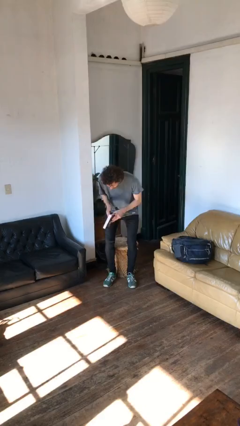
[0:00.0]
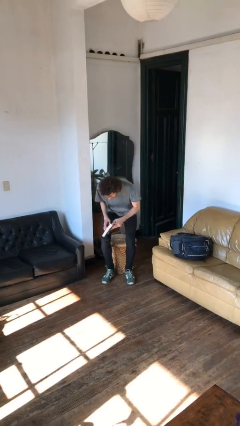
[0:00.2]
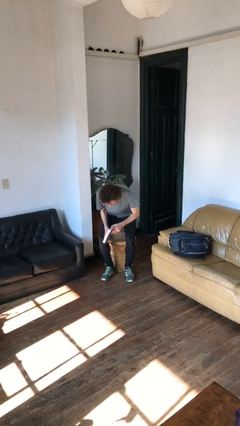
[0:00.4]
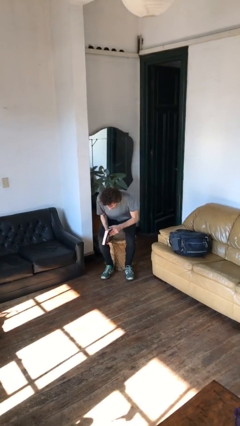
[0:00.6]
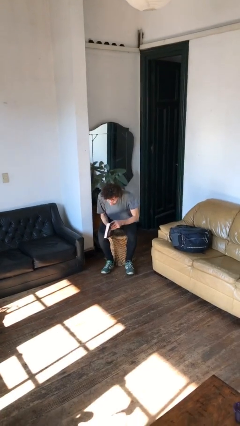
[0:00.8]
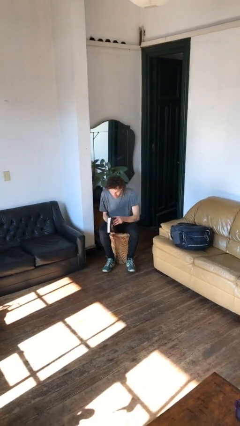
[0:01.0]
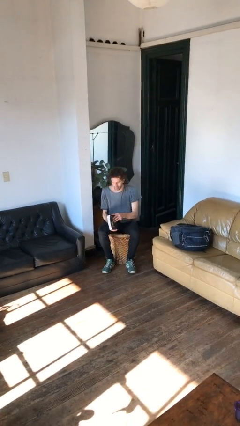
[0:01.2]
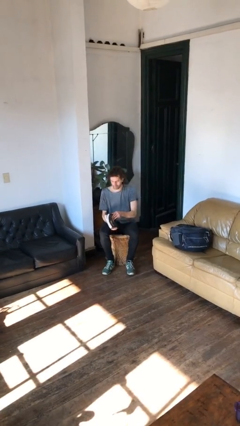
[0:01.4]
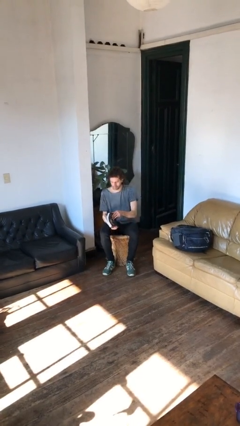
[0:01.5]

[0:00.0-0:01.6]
person sits down

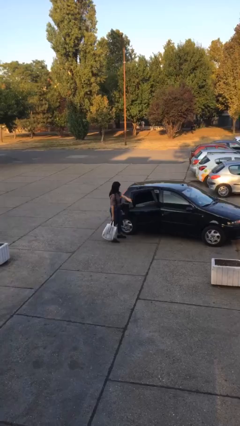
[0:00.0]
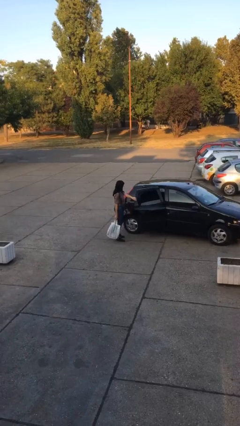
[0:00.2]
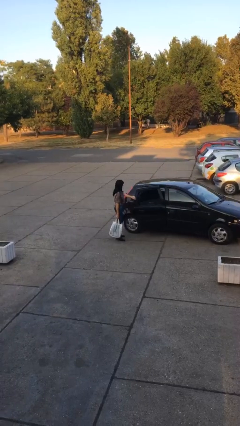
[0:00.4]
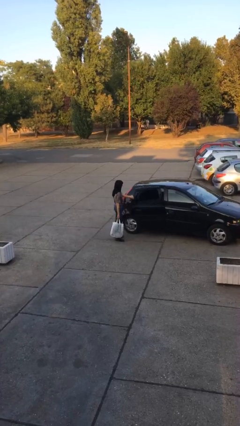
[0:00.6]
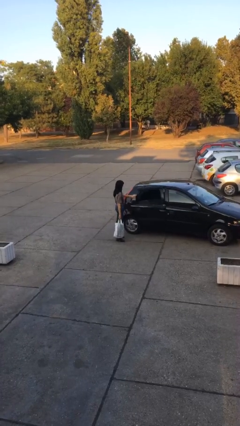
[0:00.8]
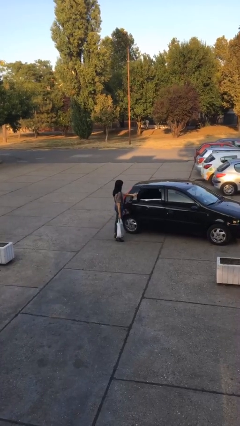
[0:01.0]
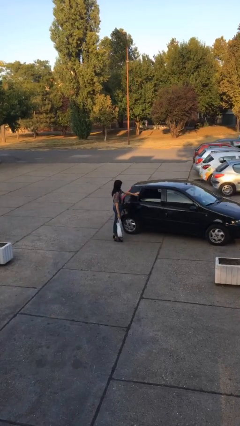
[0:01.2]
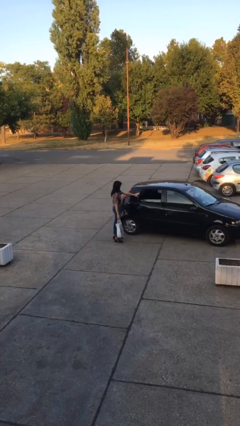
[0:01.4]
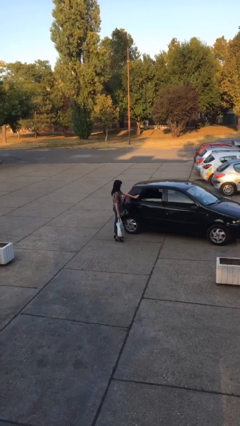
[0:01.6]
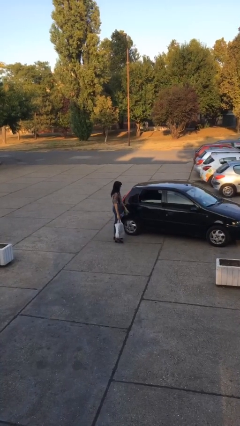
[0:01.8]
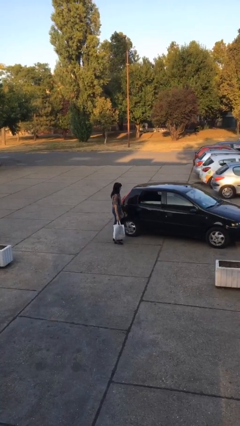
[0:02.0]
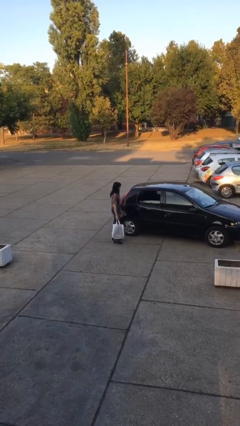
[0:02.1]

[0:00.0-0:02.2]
person closes car door

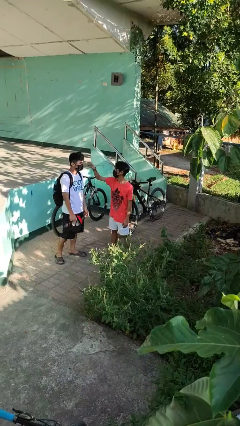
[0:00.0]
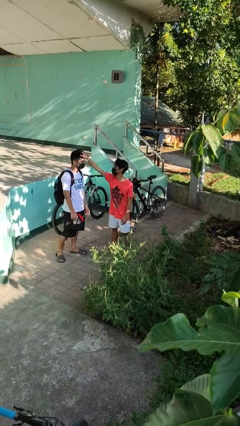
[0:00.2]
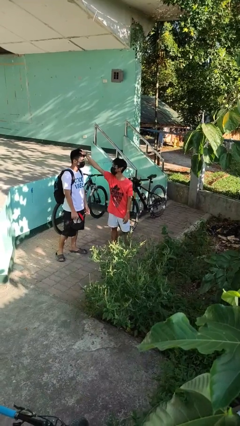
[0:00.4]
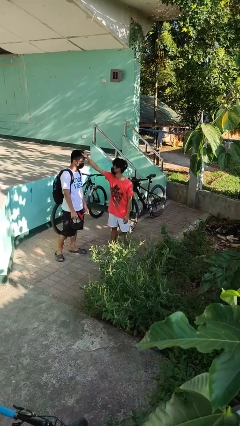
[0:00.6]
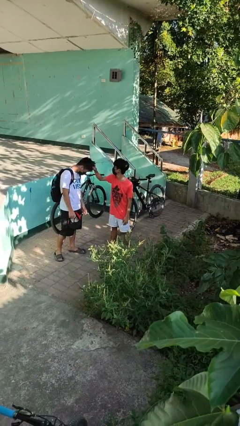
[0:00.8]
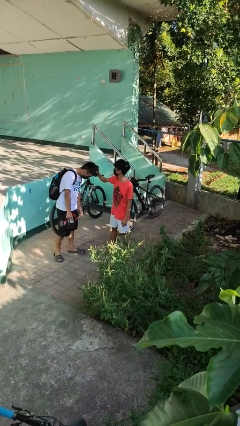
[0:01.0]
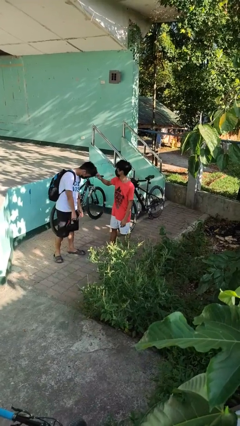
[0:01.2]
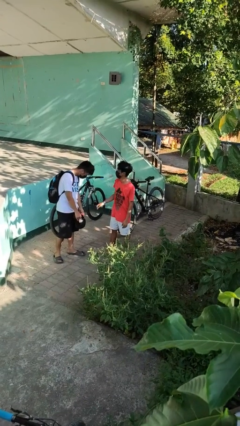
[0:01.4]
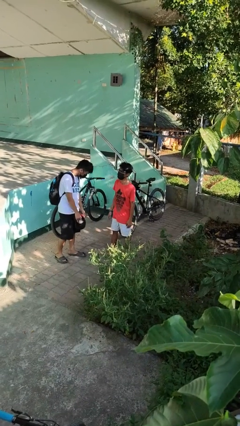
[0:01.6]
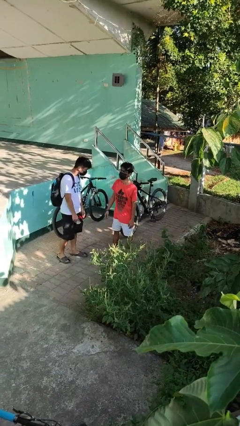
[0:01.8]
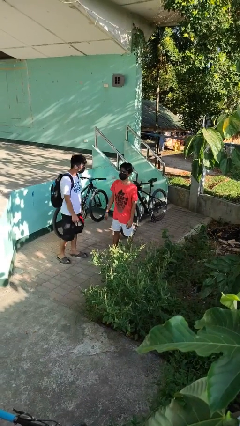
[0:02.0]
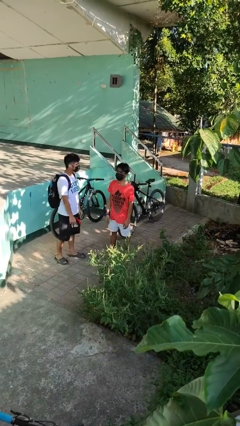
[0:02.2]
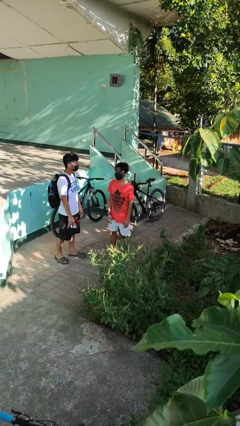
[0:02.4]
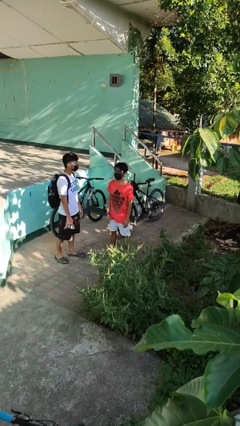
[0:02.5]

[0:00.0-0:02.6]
person grabs person by hair

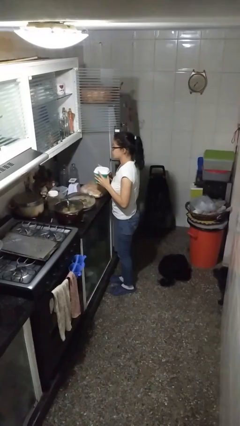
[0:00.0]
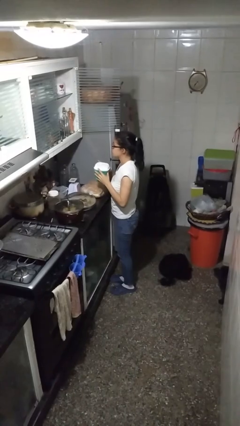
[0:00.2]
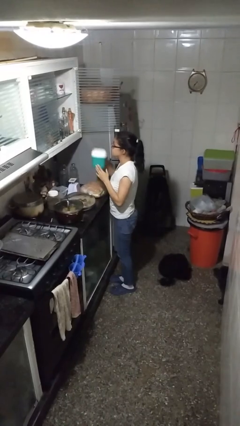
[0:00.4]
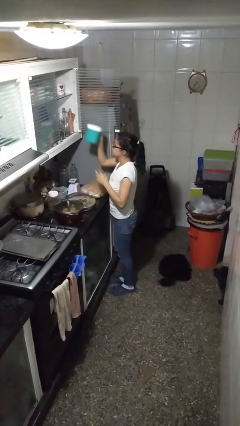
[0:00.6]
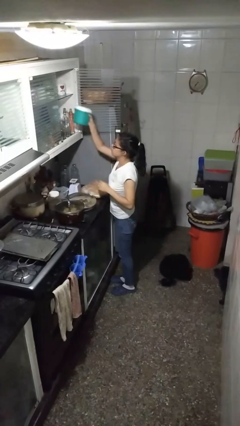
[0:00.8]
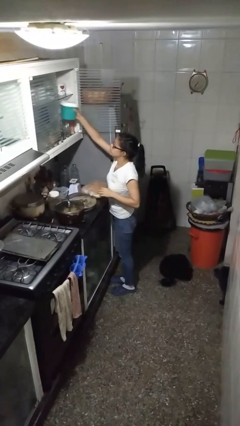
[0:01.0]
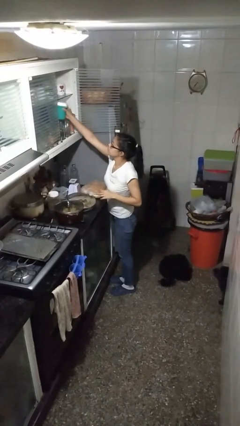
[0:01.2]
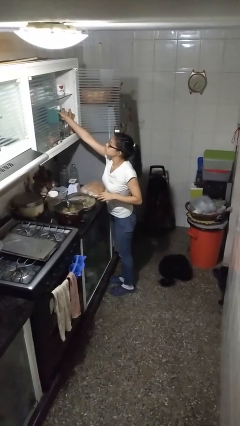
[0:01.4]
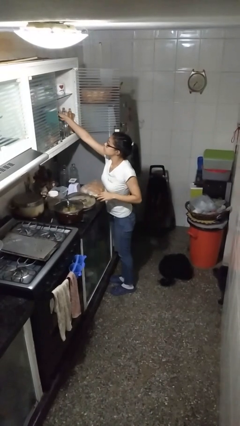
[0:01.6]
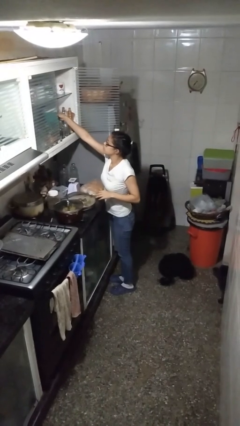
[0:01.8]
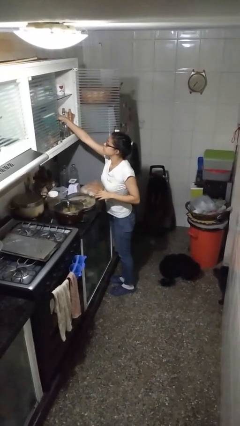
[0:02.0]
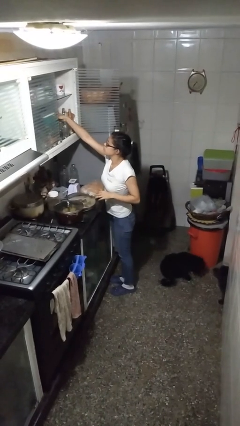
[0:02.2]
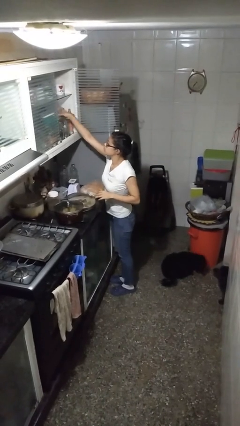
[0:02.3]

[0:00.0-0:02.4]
person puts down object into cabinet

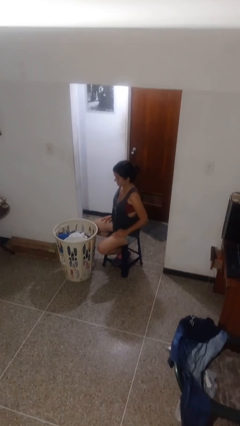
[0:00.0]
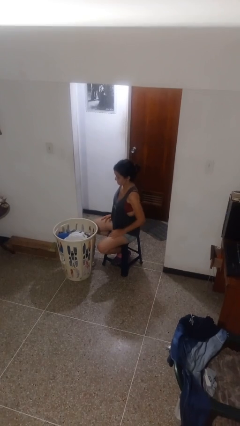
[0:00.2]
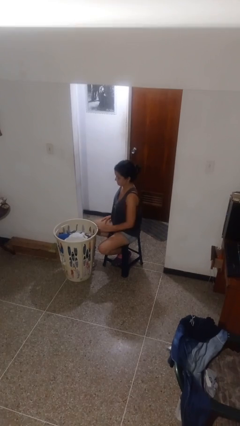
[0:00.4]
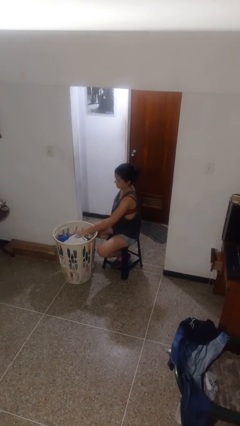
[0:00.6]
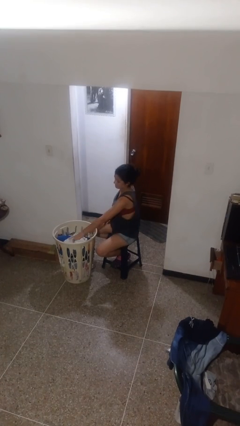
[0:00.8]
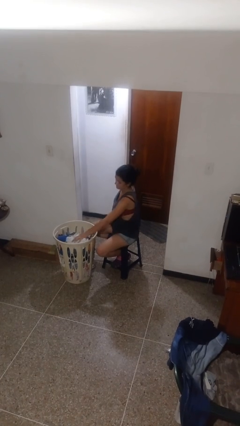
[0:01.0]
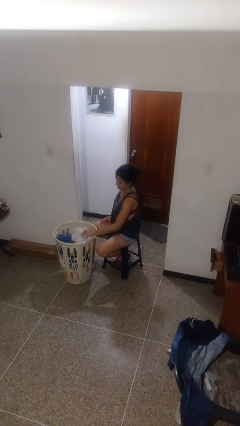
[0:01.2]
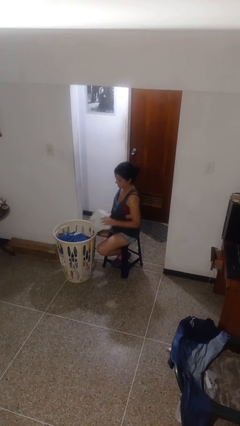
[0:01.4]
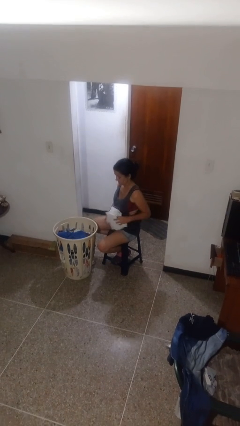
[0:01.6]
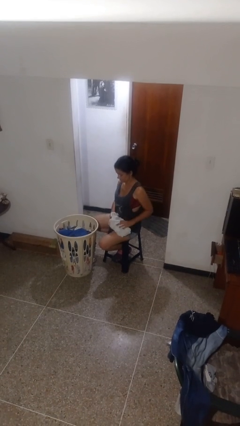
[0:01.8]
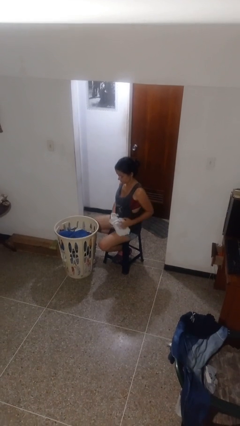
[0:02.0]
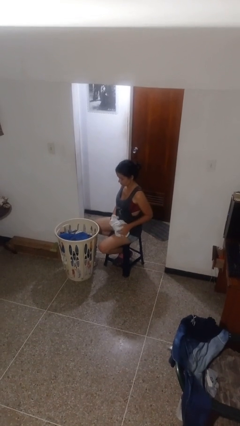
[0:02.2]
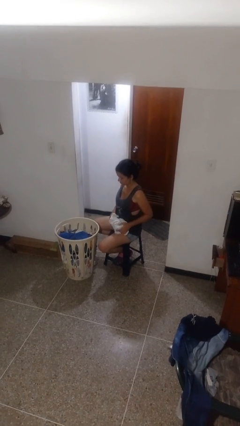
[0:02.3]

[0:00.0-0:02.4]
person takes object from basket

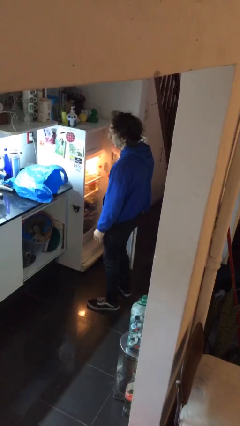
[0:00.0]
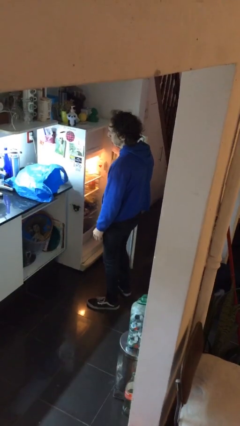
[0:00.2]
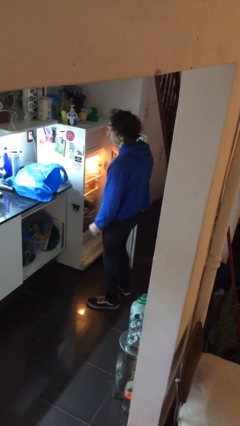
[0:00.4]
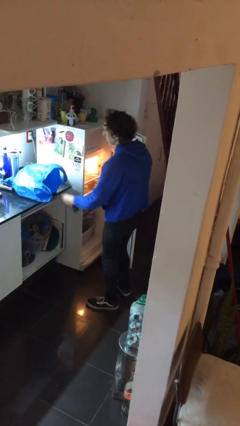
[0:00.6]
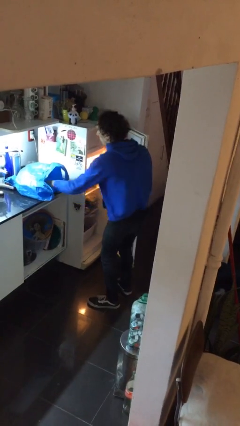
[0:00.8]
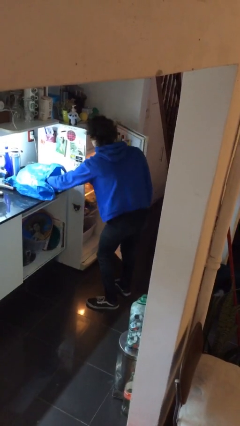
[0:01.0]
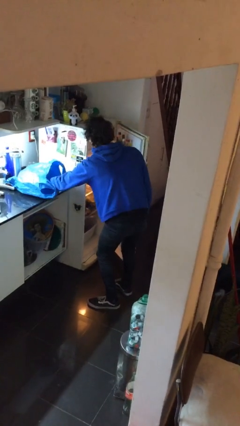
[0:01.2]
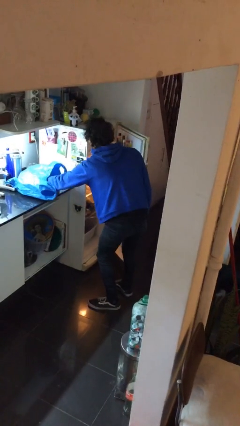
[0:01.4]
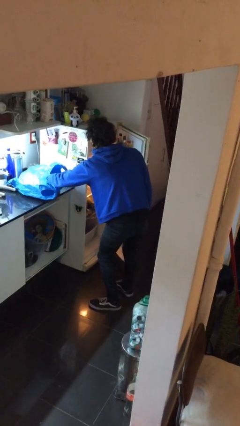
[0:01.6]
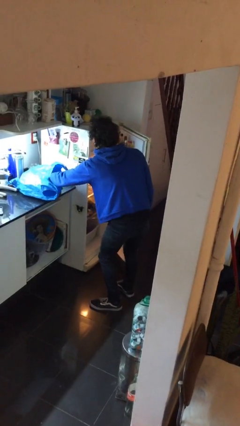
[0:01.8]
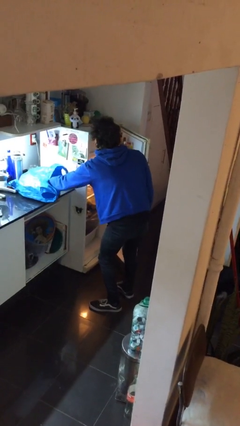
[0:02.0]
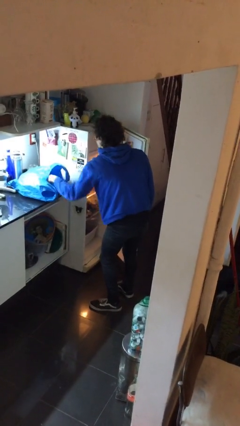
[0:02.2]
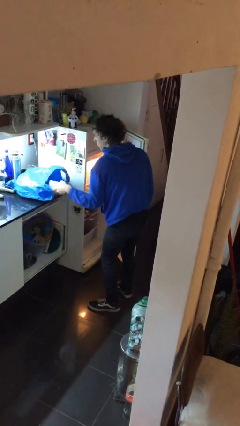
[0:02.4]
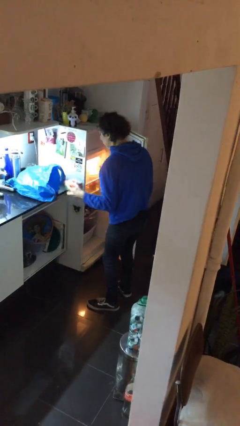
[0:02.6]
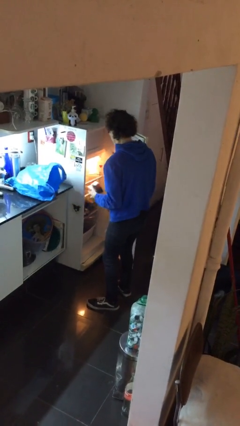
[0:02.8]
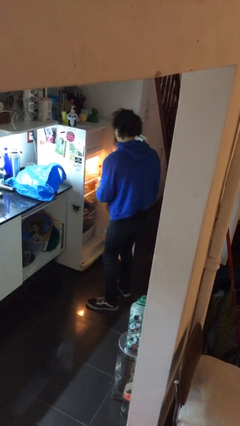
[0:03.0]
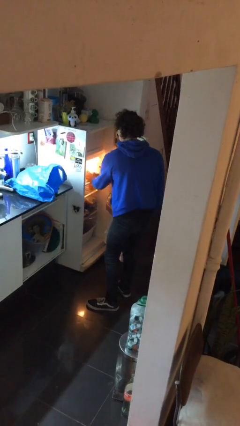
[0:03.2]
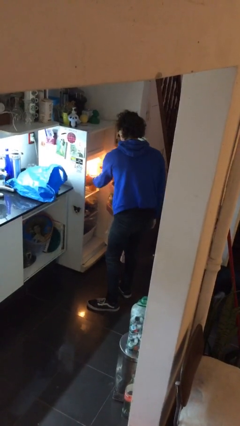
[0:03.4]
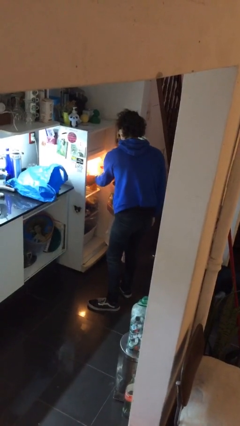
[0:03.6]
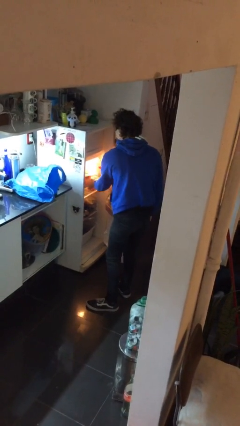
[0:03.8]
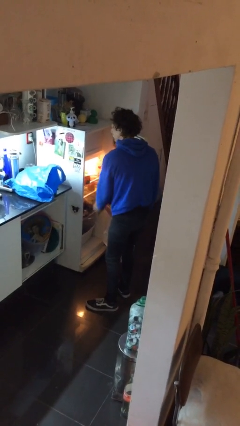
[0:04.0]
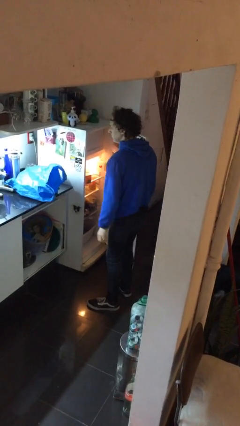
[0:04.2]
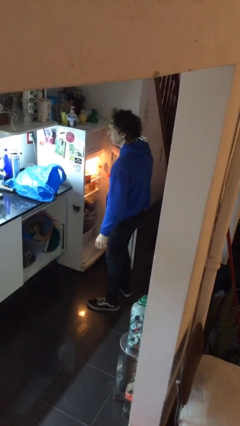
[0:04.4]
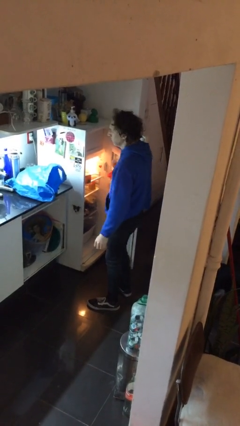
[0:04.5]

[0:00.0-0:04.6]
person loads groceries into refrigerator

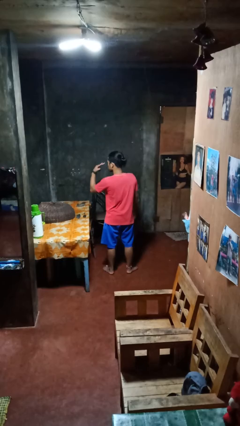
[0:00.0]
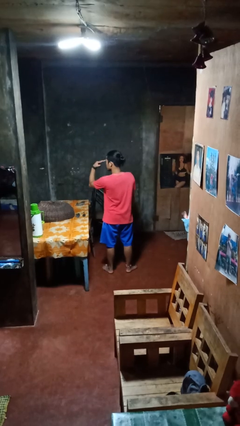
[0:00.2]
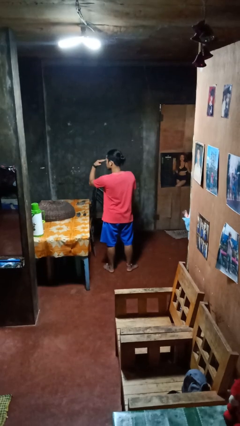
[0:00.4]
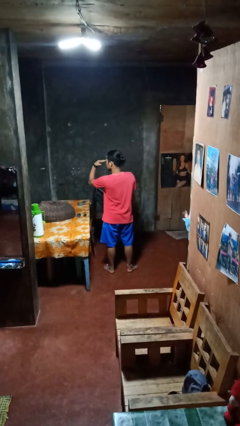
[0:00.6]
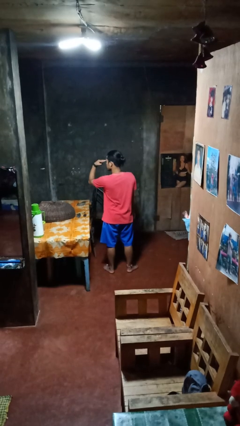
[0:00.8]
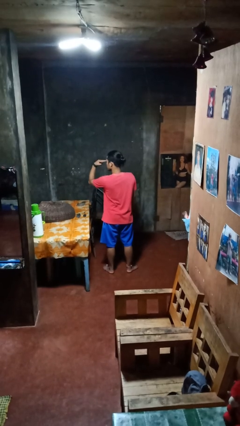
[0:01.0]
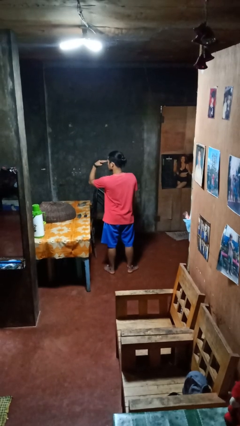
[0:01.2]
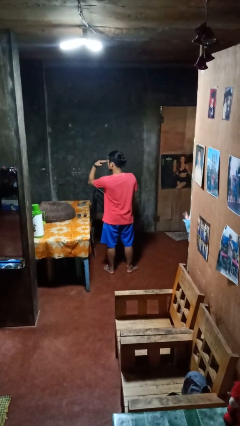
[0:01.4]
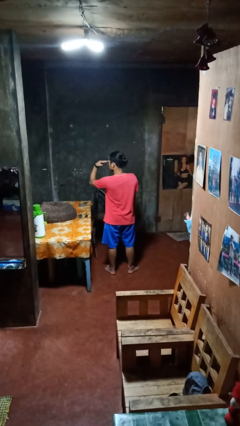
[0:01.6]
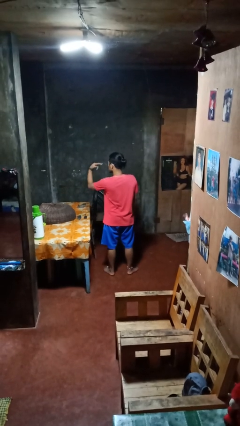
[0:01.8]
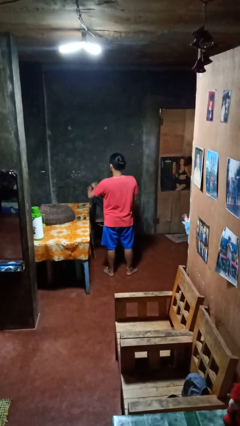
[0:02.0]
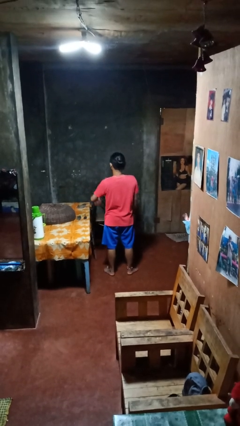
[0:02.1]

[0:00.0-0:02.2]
person gestures watch closely
